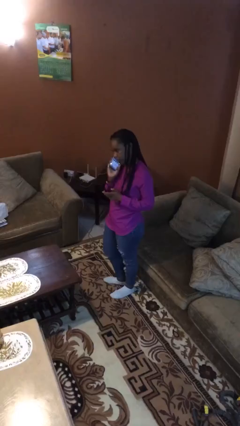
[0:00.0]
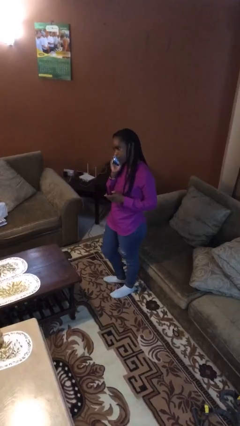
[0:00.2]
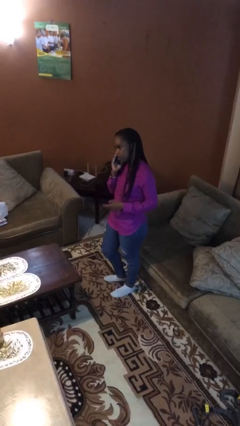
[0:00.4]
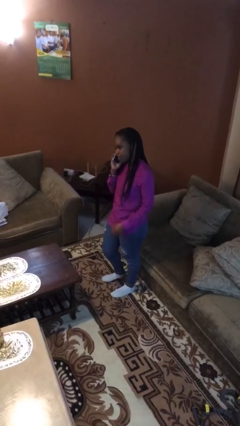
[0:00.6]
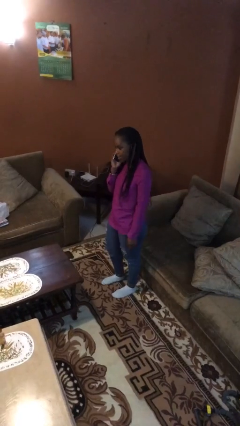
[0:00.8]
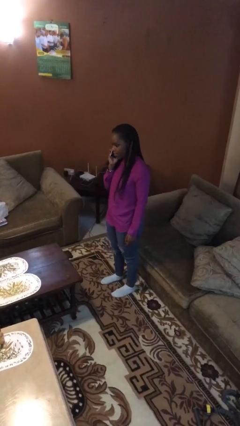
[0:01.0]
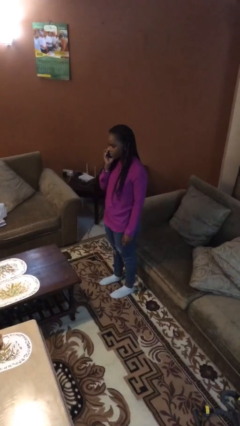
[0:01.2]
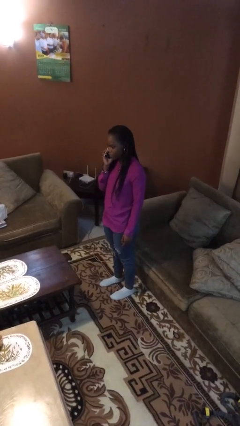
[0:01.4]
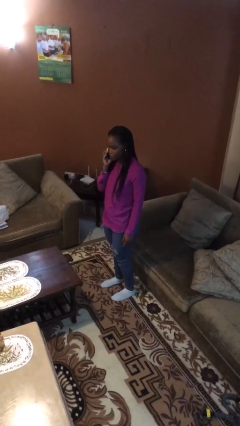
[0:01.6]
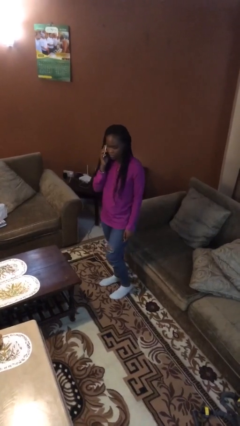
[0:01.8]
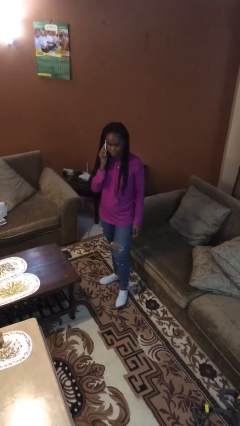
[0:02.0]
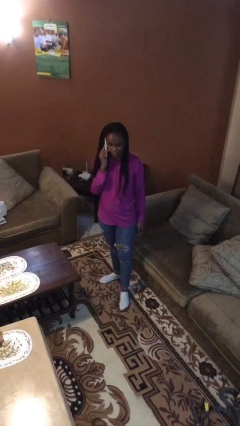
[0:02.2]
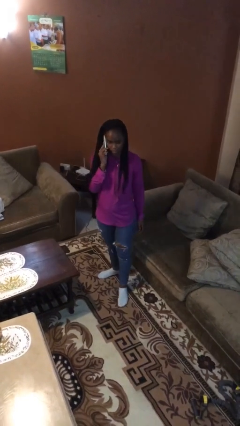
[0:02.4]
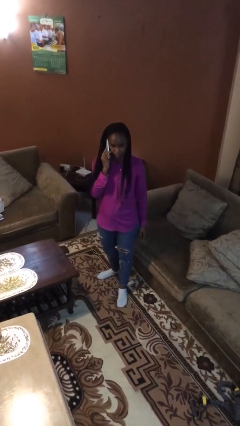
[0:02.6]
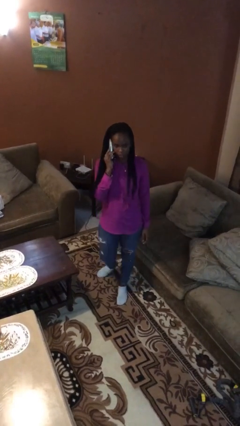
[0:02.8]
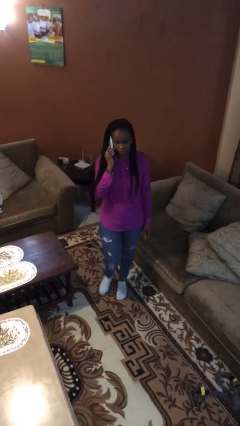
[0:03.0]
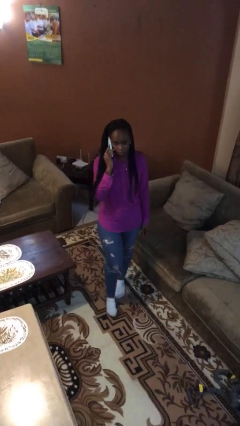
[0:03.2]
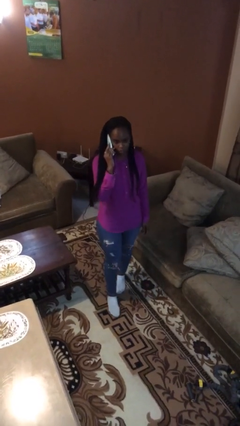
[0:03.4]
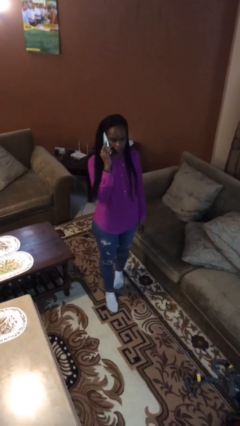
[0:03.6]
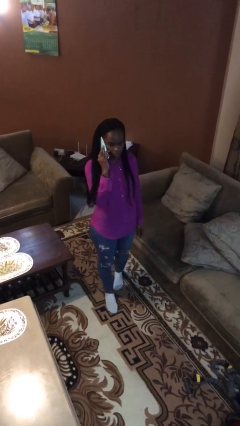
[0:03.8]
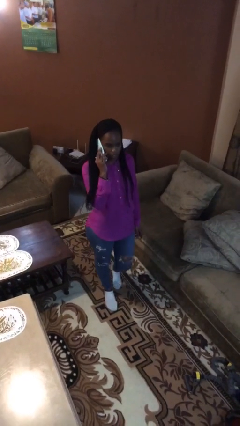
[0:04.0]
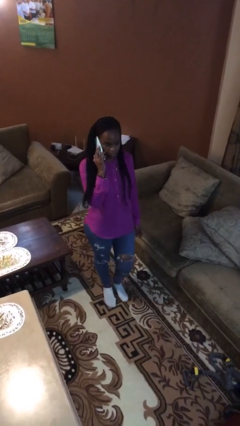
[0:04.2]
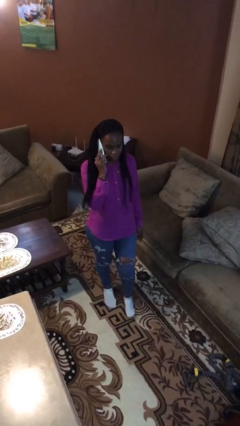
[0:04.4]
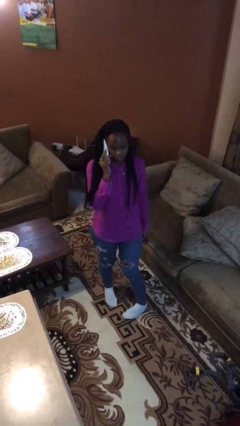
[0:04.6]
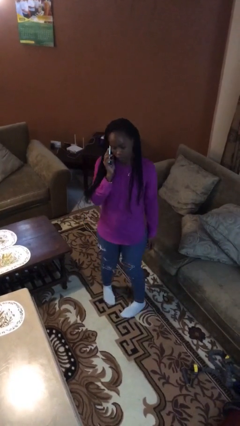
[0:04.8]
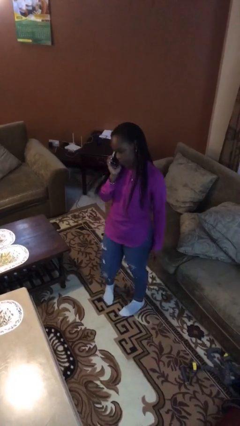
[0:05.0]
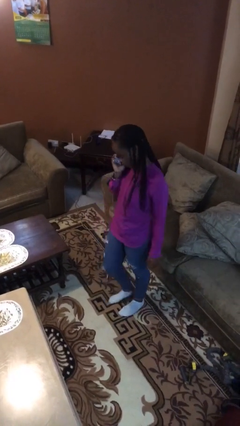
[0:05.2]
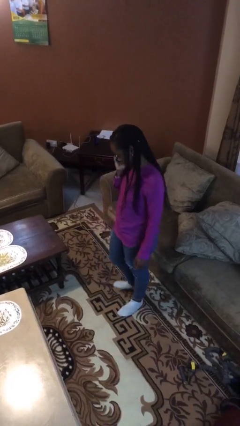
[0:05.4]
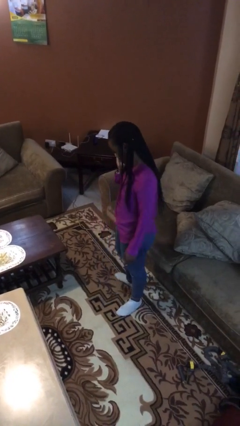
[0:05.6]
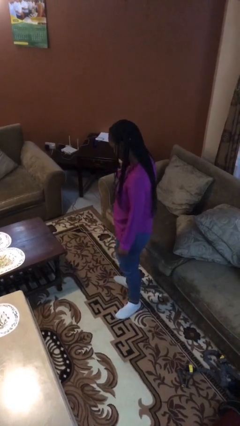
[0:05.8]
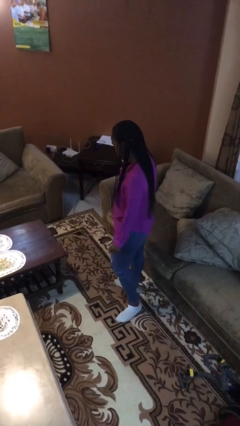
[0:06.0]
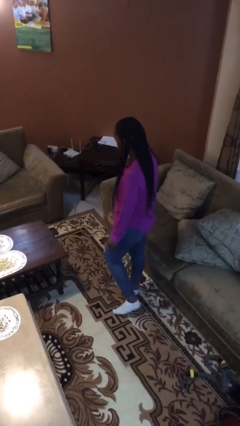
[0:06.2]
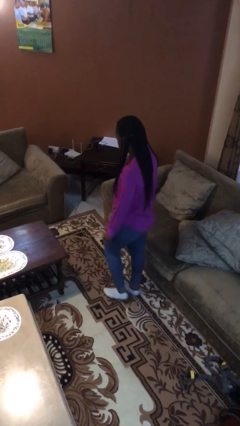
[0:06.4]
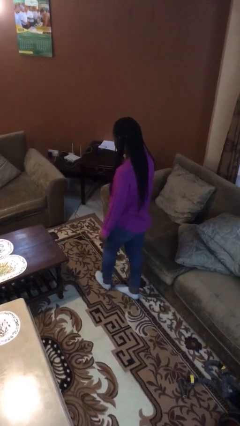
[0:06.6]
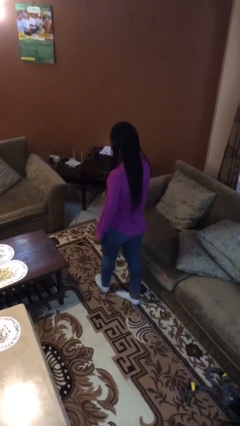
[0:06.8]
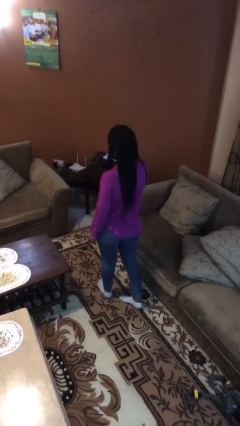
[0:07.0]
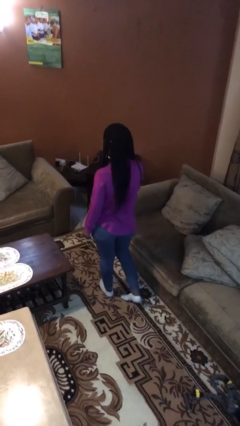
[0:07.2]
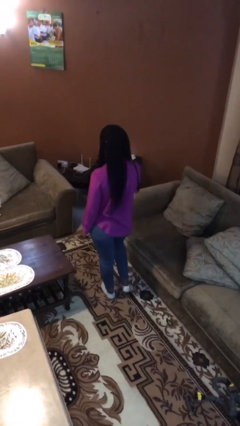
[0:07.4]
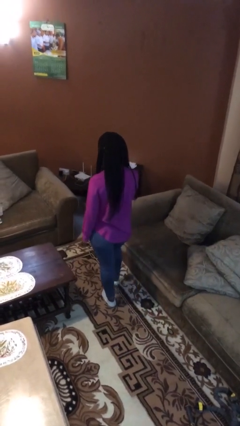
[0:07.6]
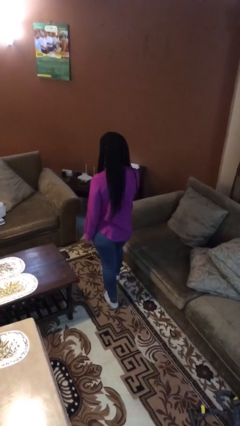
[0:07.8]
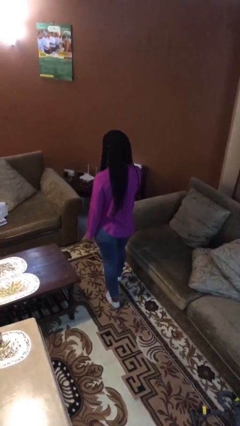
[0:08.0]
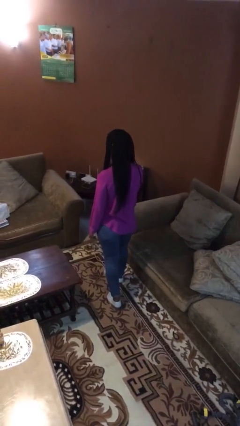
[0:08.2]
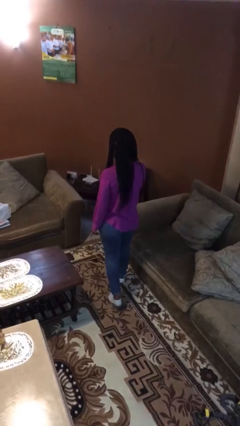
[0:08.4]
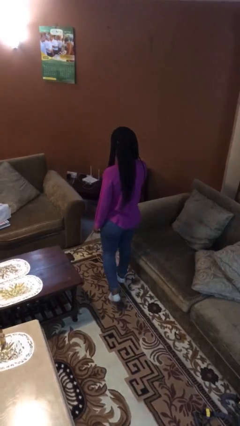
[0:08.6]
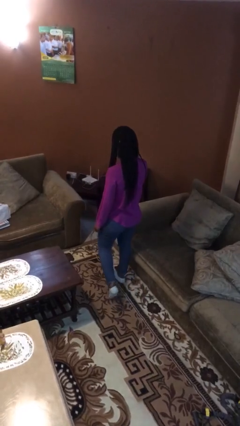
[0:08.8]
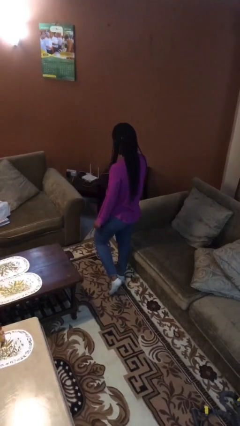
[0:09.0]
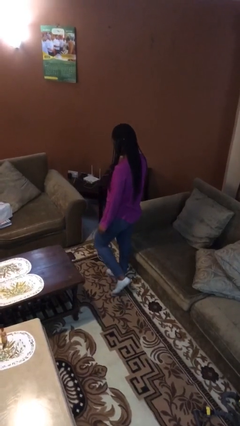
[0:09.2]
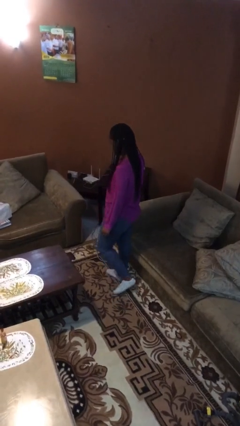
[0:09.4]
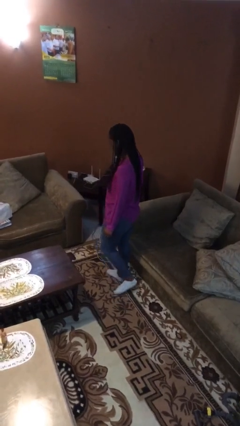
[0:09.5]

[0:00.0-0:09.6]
person talks on phone

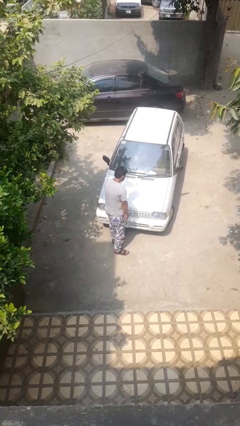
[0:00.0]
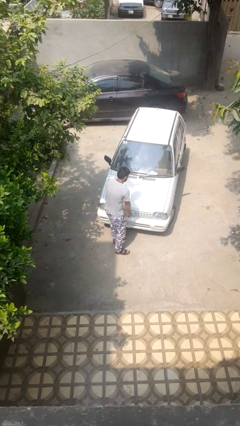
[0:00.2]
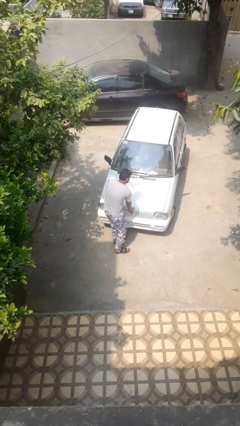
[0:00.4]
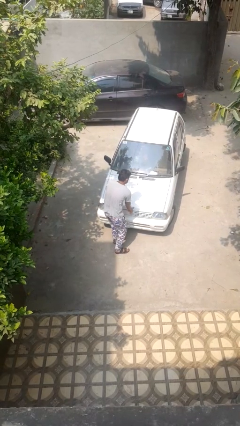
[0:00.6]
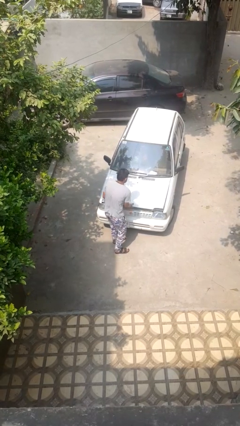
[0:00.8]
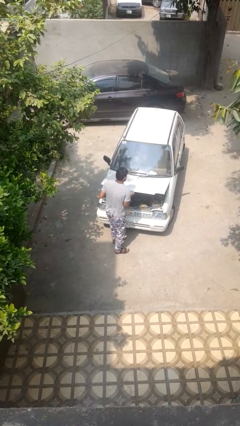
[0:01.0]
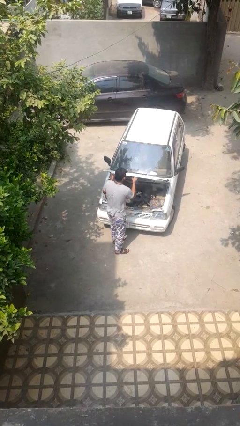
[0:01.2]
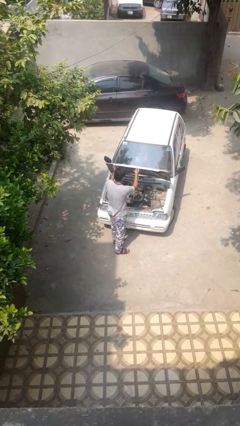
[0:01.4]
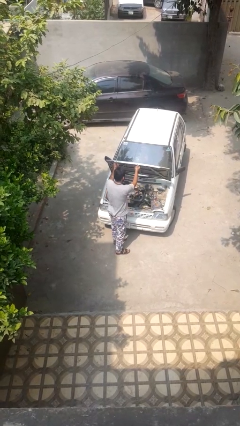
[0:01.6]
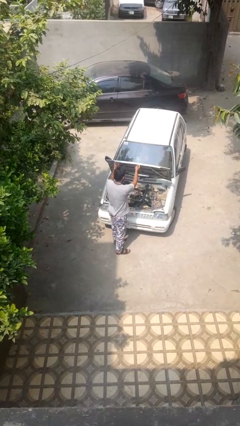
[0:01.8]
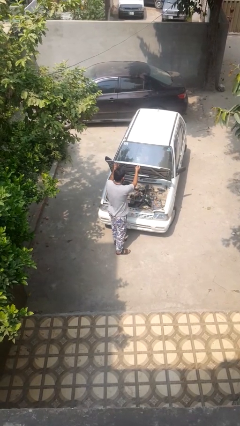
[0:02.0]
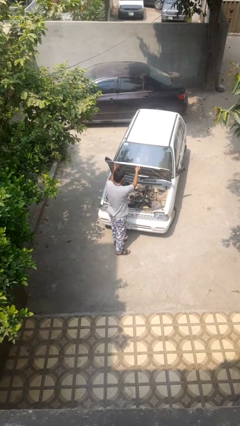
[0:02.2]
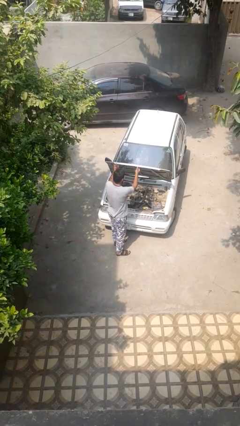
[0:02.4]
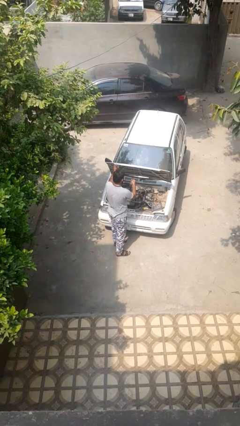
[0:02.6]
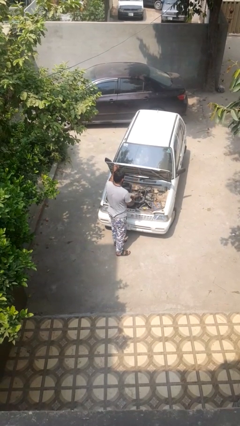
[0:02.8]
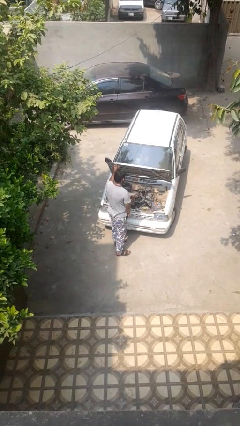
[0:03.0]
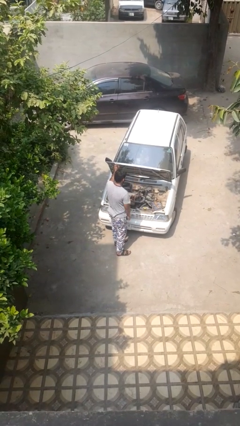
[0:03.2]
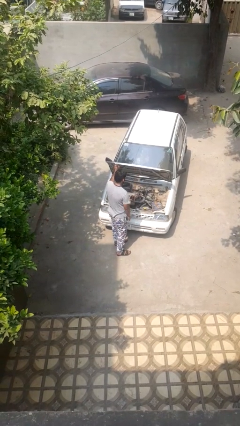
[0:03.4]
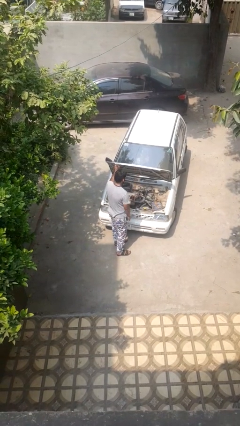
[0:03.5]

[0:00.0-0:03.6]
person opens car hood

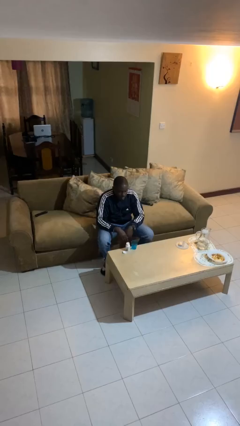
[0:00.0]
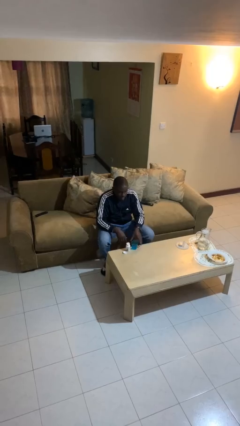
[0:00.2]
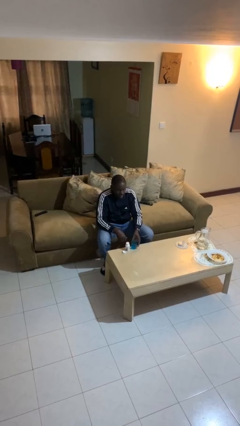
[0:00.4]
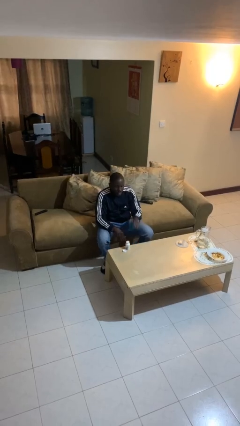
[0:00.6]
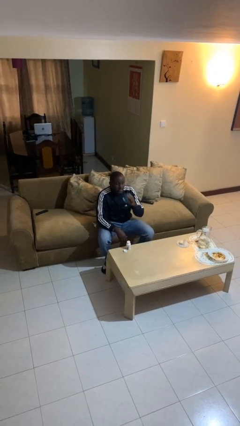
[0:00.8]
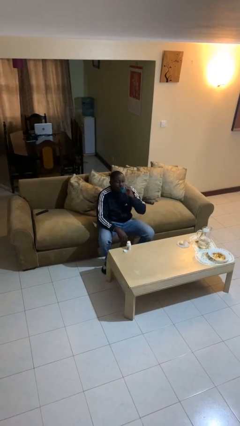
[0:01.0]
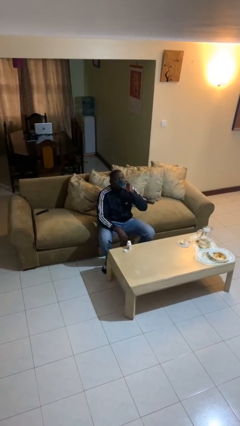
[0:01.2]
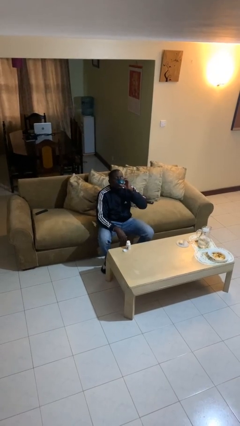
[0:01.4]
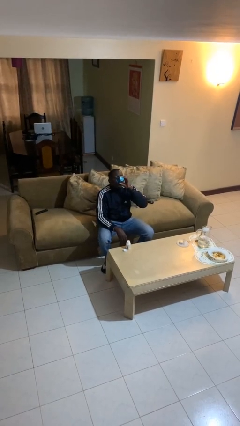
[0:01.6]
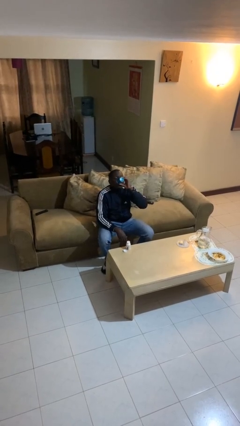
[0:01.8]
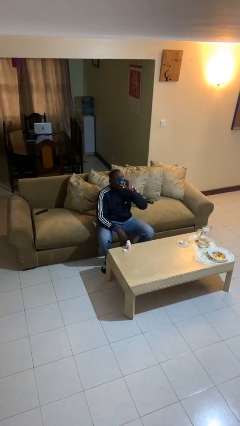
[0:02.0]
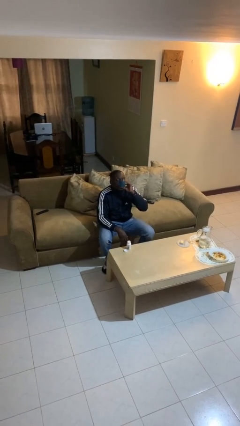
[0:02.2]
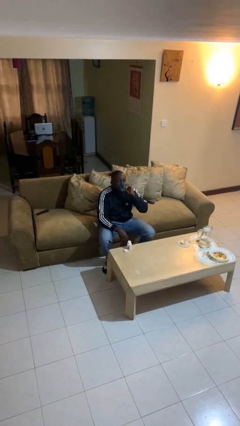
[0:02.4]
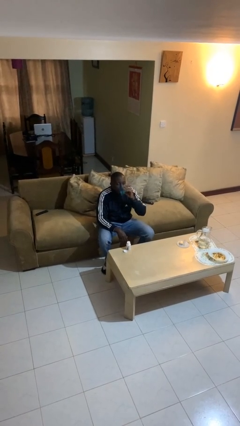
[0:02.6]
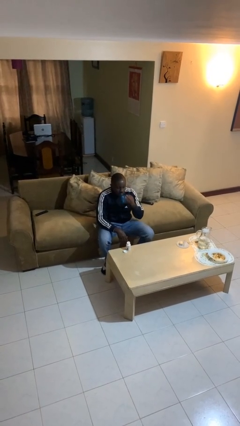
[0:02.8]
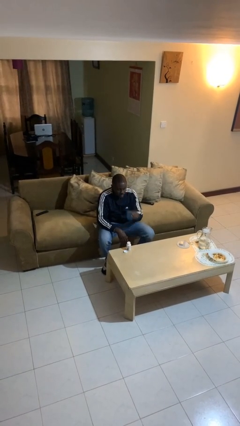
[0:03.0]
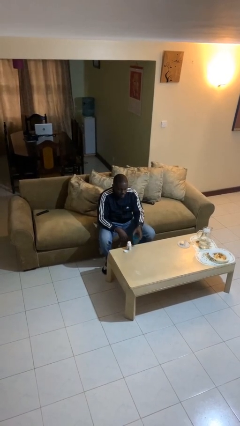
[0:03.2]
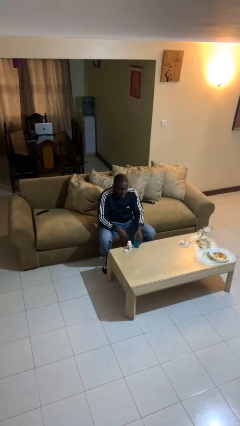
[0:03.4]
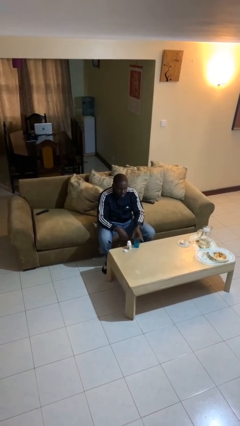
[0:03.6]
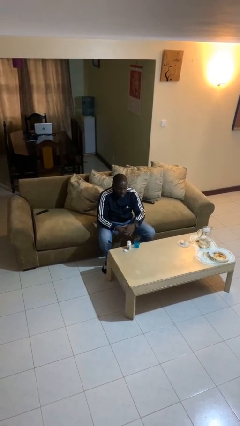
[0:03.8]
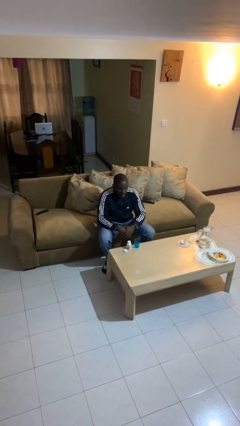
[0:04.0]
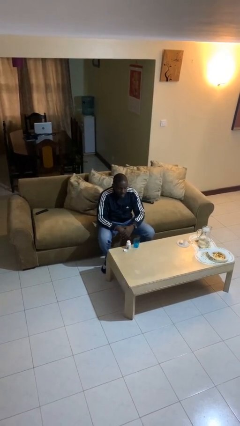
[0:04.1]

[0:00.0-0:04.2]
person drinks from cup

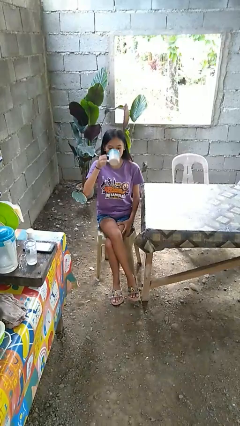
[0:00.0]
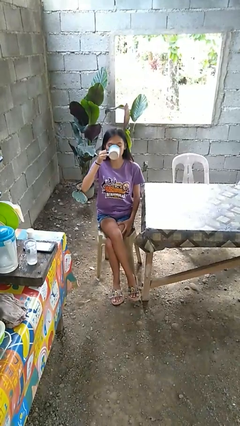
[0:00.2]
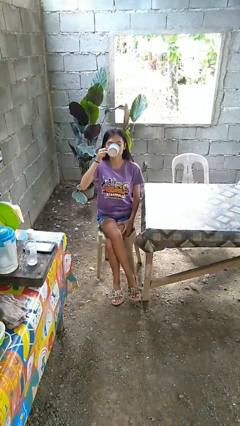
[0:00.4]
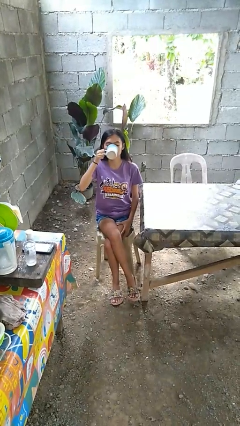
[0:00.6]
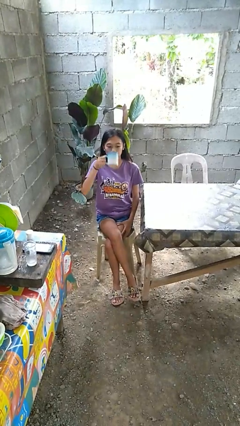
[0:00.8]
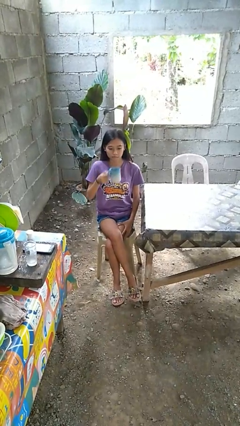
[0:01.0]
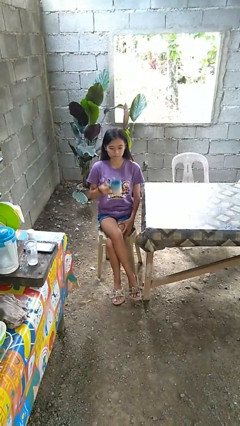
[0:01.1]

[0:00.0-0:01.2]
person drinks from mug
